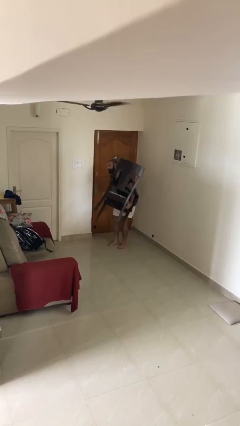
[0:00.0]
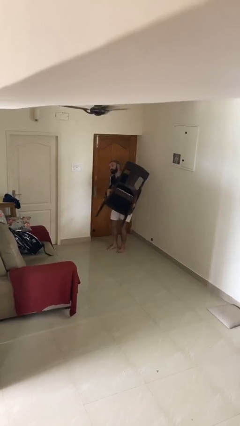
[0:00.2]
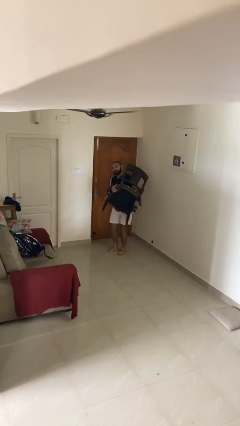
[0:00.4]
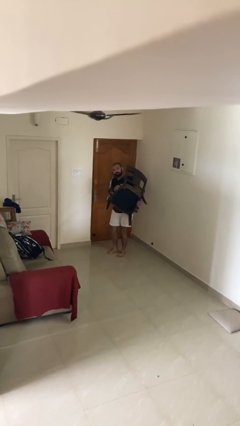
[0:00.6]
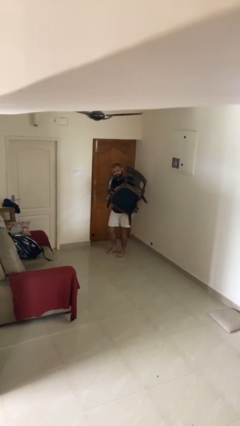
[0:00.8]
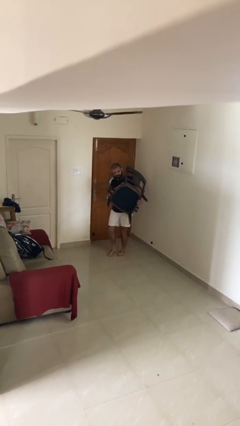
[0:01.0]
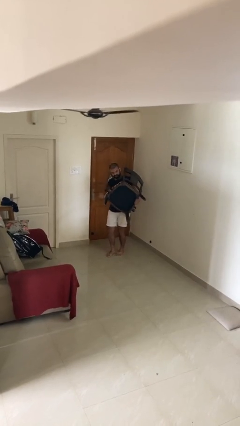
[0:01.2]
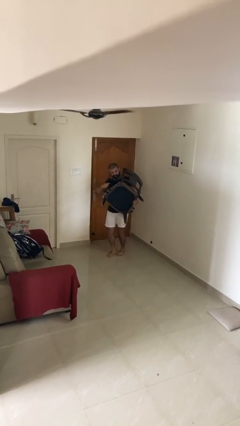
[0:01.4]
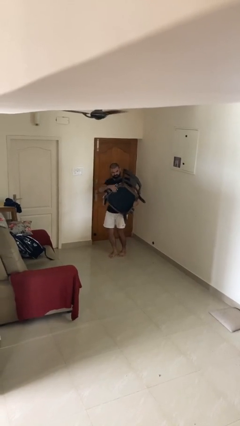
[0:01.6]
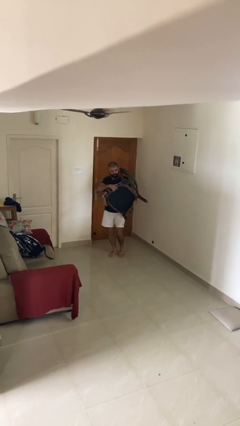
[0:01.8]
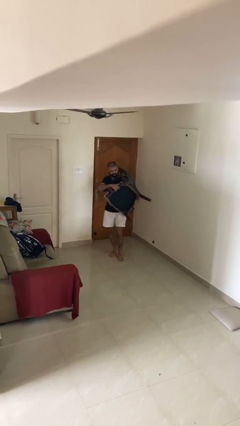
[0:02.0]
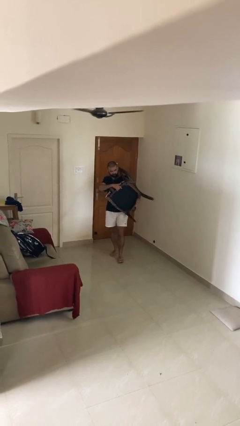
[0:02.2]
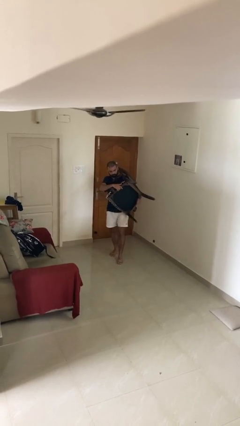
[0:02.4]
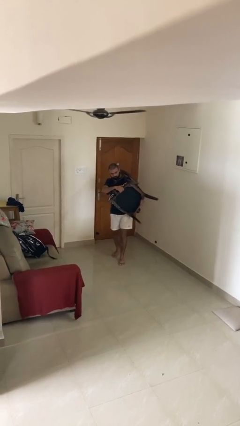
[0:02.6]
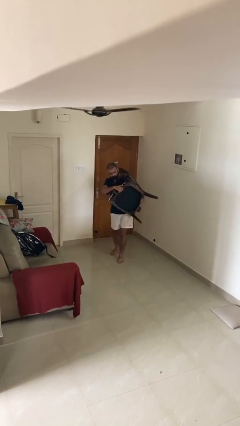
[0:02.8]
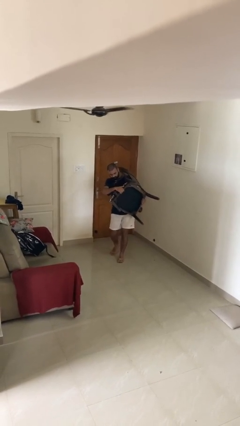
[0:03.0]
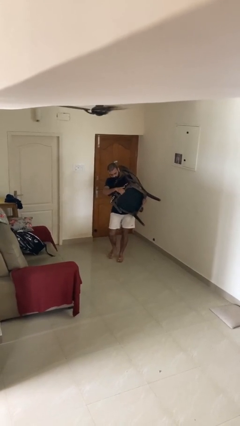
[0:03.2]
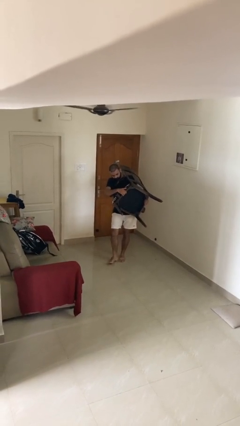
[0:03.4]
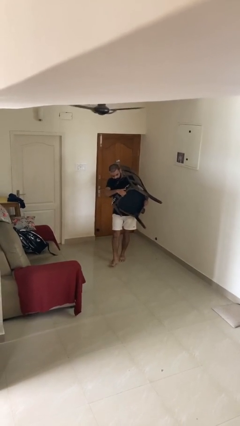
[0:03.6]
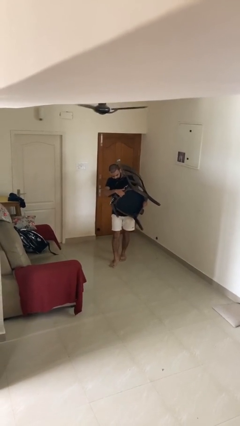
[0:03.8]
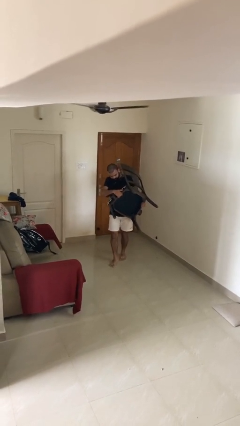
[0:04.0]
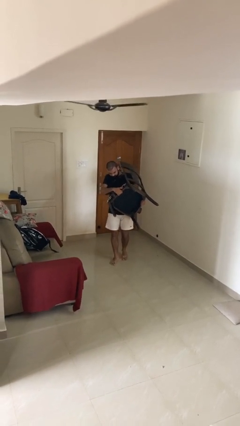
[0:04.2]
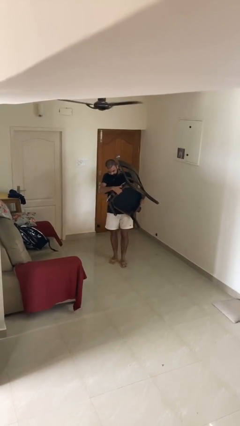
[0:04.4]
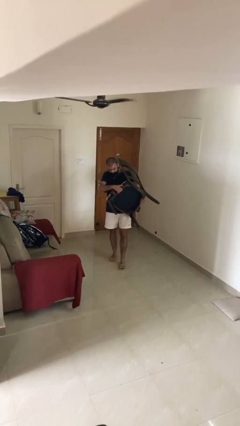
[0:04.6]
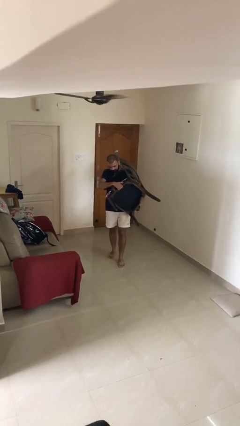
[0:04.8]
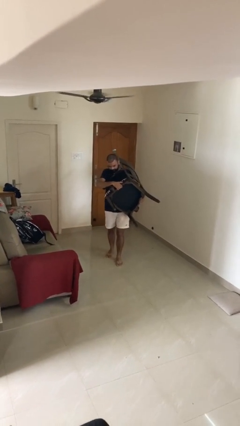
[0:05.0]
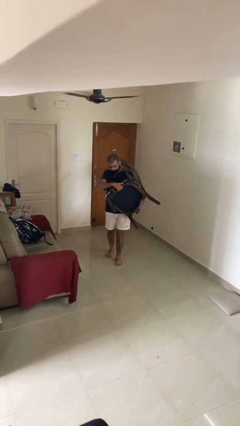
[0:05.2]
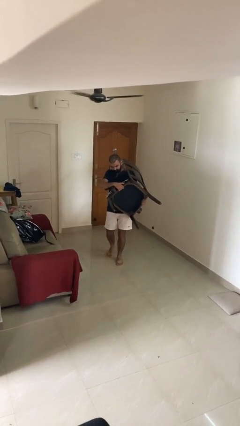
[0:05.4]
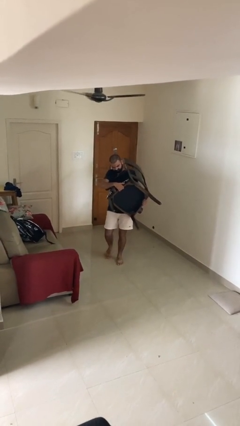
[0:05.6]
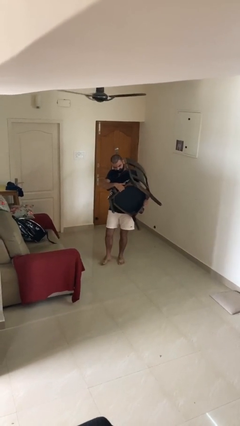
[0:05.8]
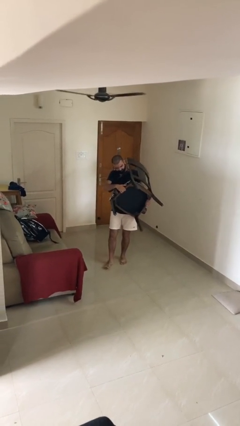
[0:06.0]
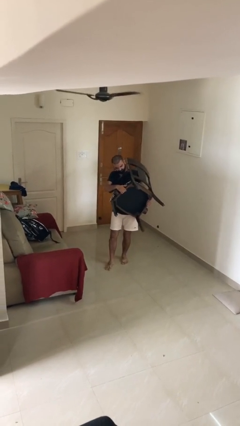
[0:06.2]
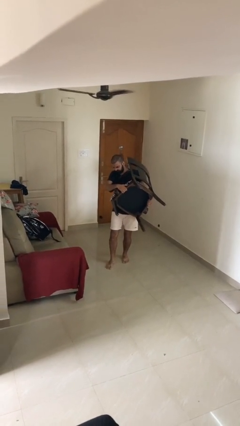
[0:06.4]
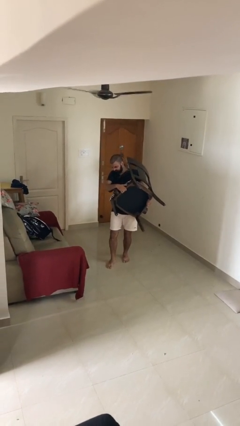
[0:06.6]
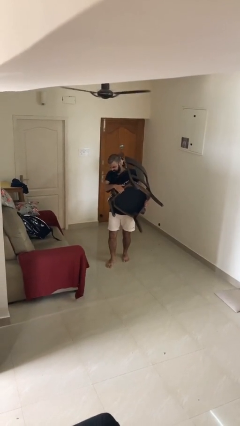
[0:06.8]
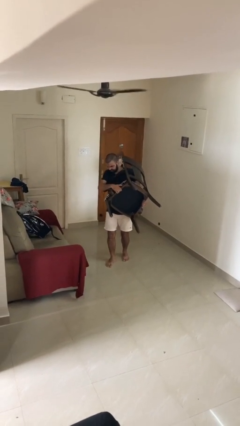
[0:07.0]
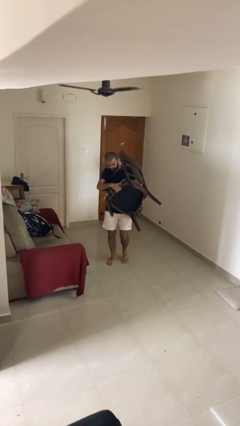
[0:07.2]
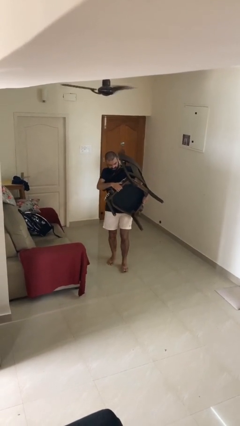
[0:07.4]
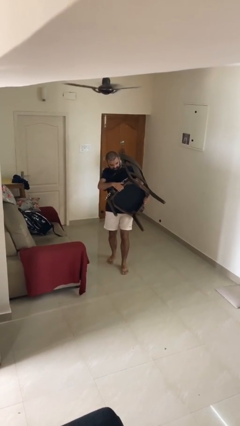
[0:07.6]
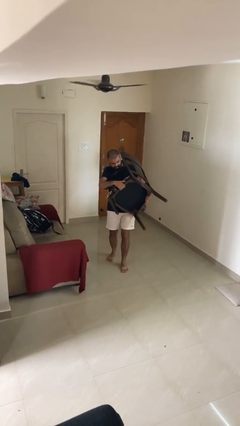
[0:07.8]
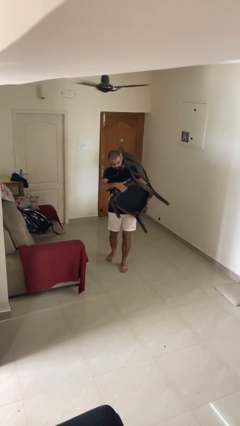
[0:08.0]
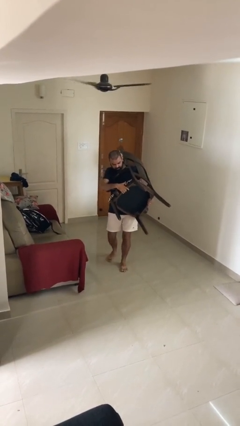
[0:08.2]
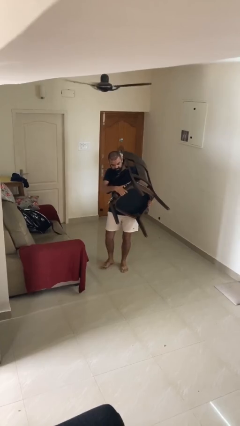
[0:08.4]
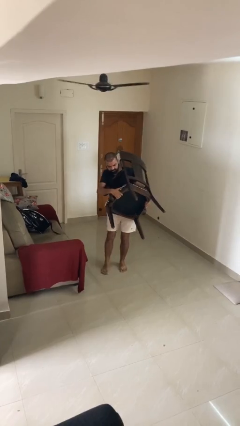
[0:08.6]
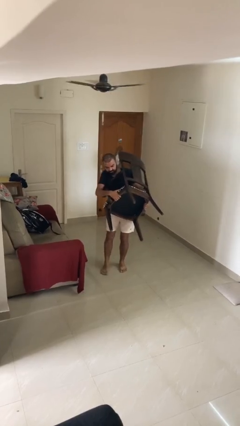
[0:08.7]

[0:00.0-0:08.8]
person carries heavy object

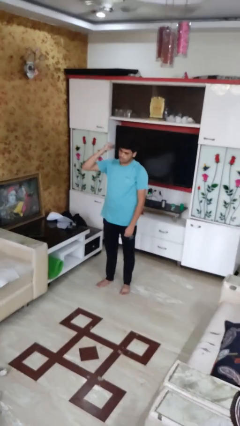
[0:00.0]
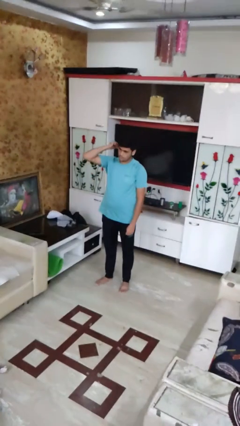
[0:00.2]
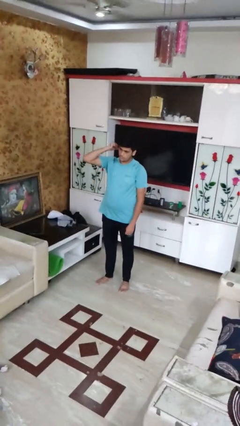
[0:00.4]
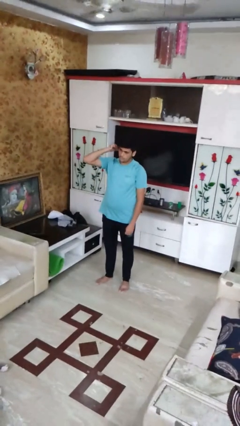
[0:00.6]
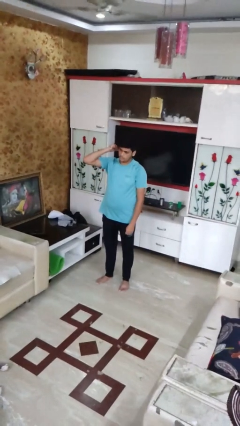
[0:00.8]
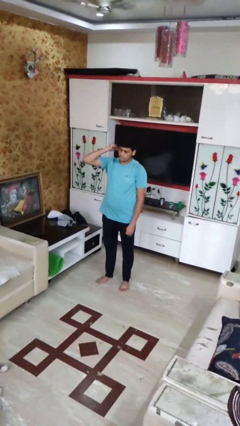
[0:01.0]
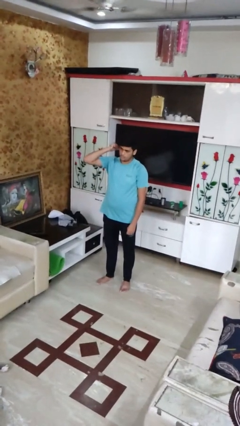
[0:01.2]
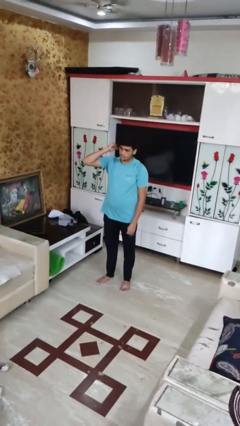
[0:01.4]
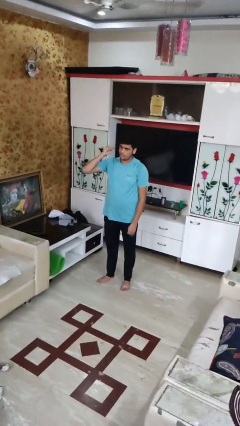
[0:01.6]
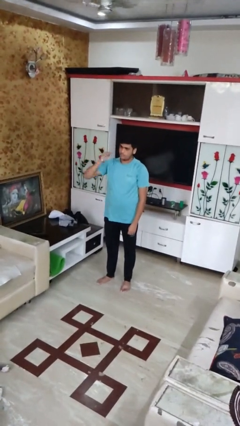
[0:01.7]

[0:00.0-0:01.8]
person gestures behind me

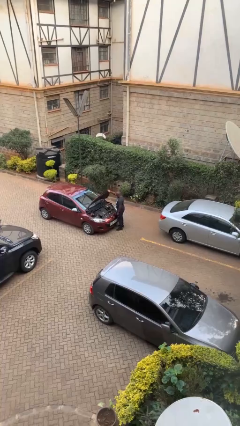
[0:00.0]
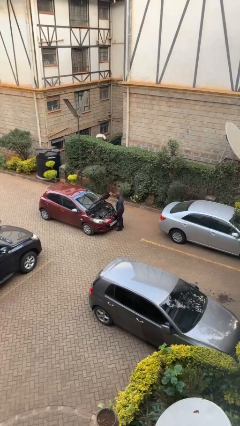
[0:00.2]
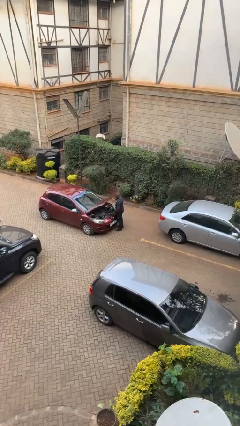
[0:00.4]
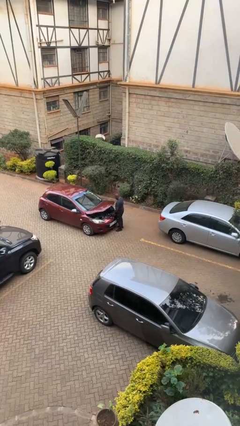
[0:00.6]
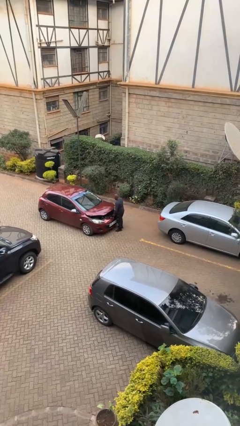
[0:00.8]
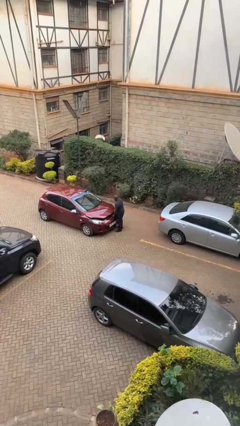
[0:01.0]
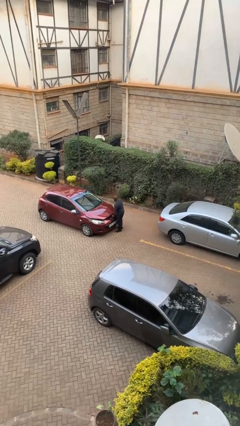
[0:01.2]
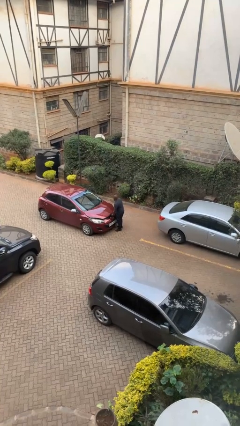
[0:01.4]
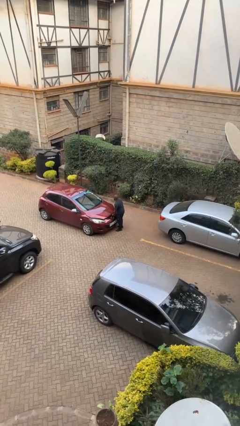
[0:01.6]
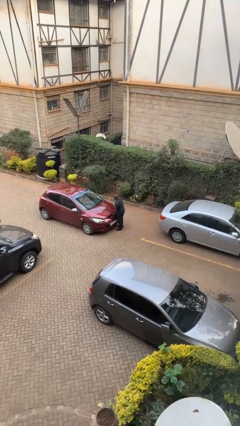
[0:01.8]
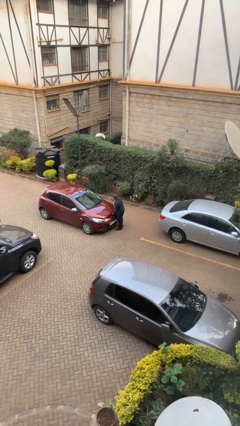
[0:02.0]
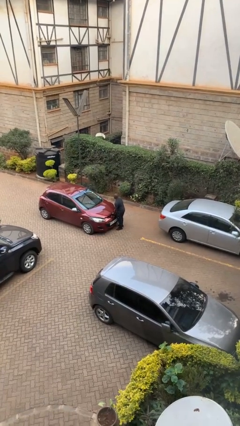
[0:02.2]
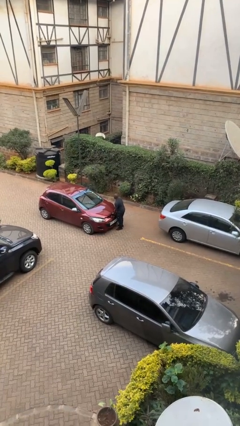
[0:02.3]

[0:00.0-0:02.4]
person closes car hood

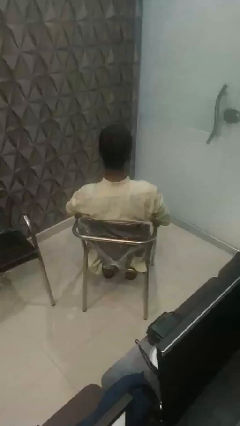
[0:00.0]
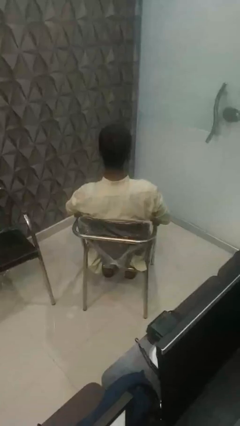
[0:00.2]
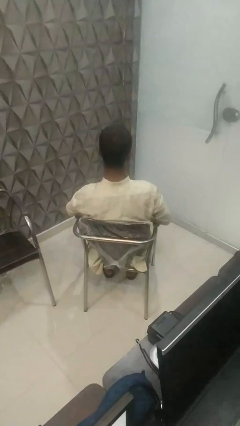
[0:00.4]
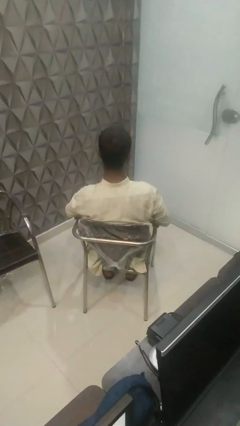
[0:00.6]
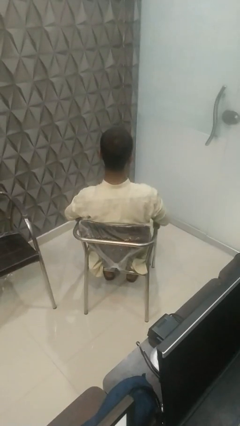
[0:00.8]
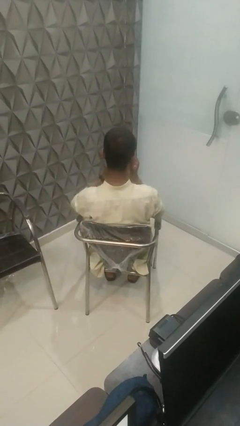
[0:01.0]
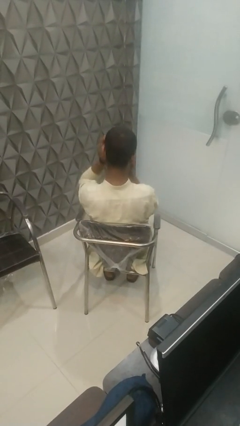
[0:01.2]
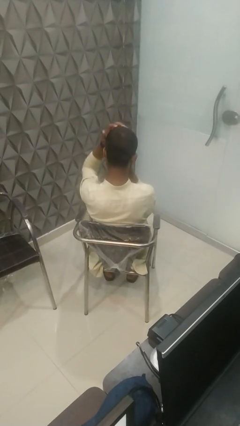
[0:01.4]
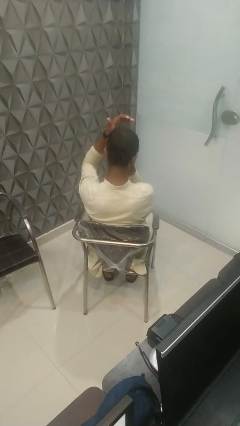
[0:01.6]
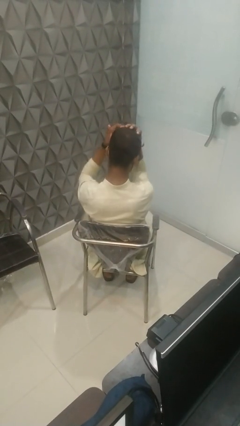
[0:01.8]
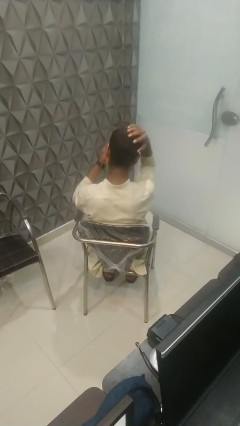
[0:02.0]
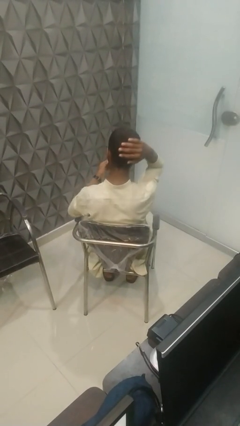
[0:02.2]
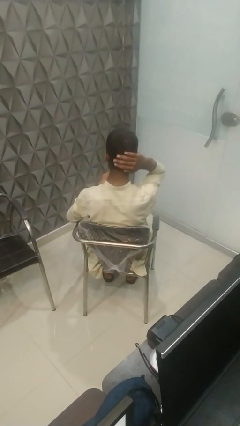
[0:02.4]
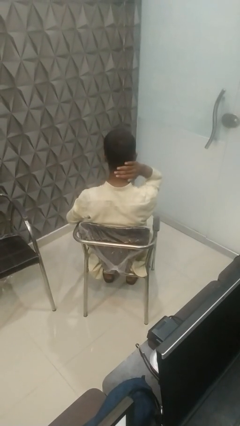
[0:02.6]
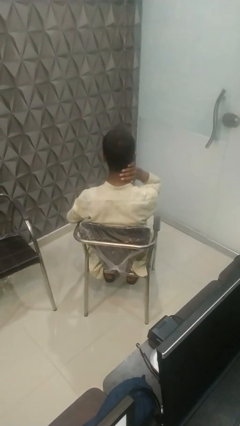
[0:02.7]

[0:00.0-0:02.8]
person strokes hair

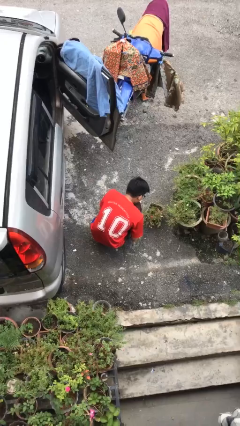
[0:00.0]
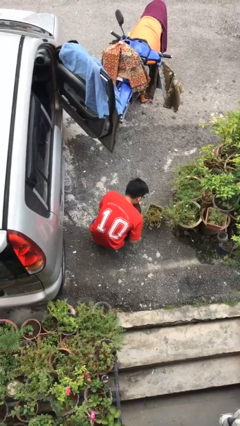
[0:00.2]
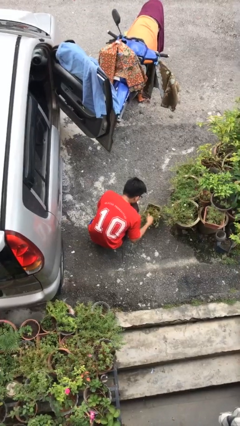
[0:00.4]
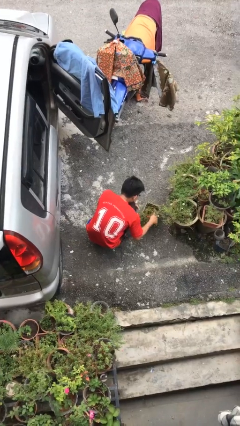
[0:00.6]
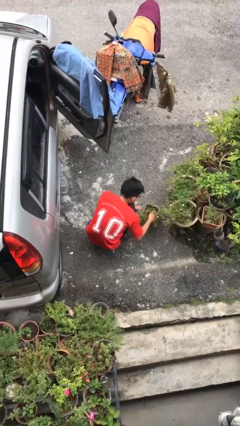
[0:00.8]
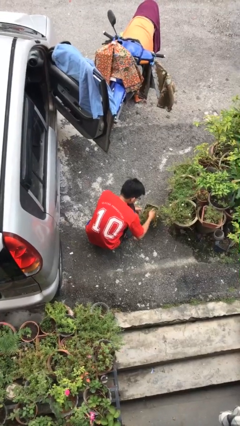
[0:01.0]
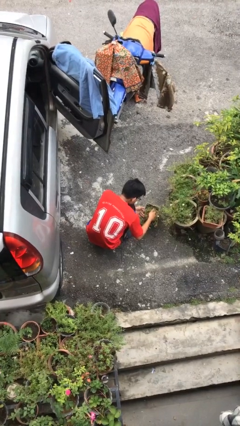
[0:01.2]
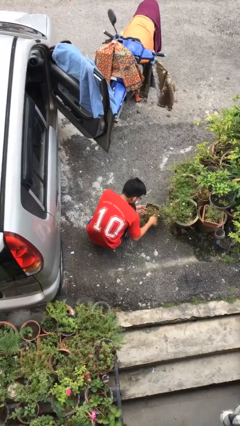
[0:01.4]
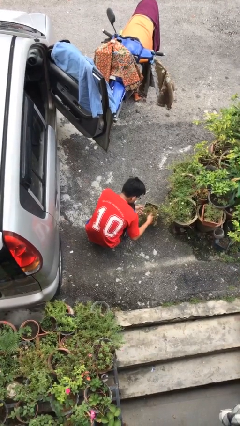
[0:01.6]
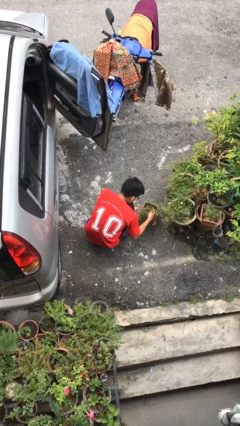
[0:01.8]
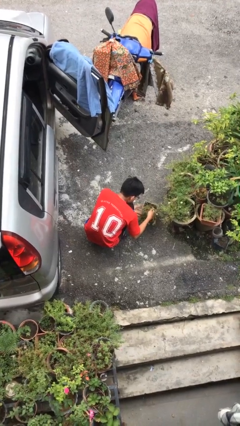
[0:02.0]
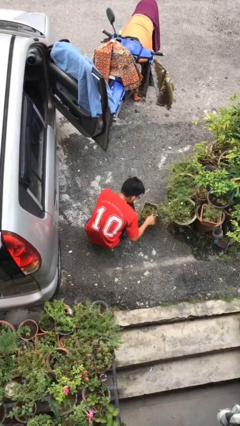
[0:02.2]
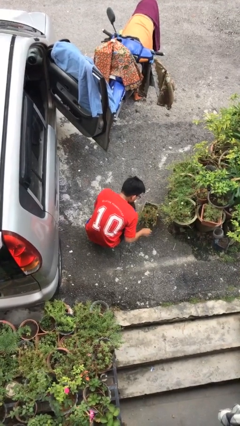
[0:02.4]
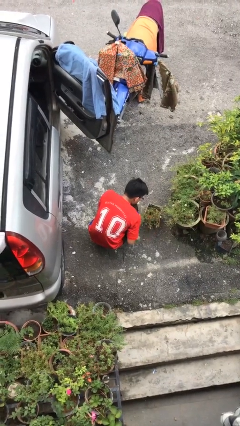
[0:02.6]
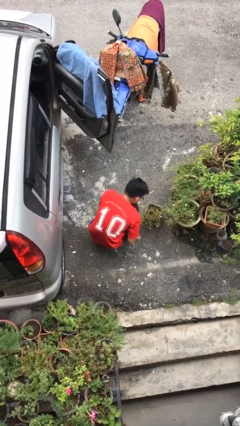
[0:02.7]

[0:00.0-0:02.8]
person arranges flowers in vase
